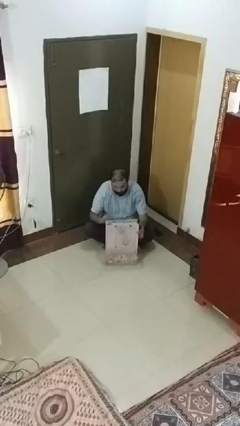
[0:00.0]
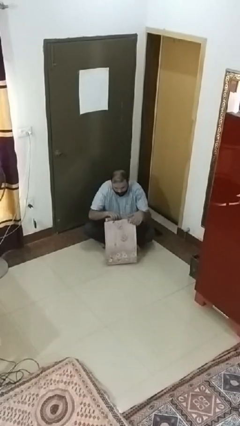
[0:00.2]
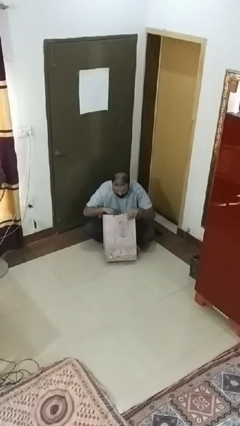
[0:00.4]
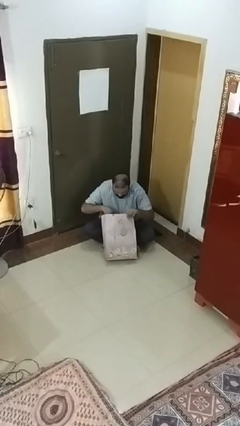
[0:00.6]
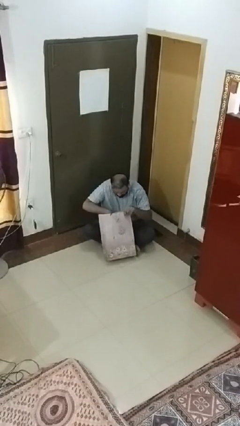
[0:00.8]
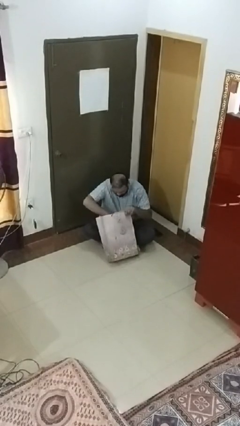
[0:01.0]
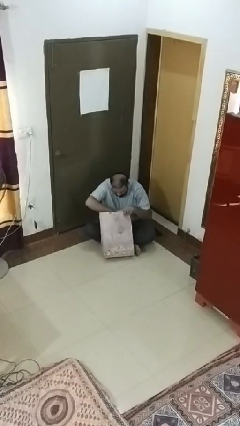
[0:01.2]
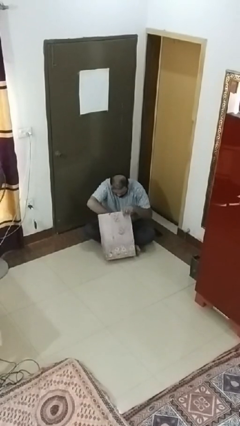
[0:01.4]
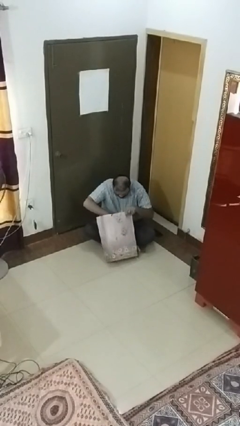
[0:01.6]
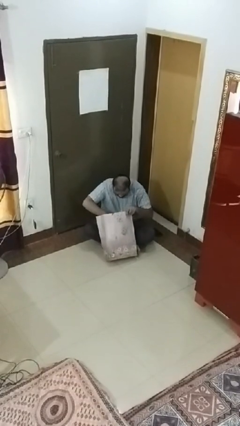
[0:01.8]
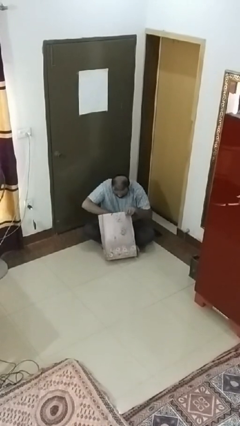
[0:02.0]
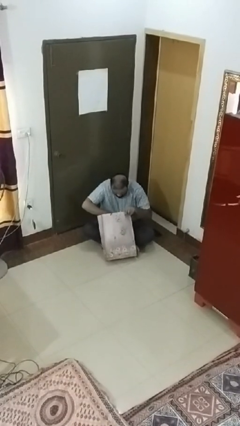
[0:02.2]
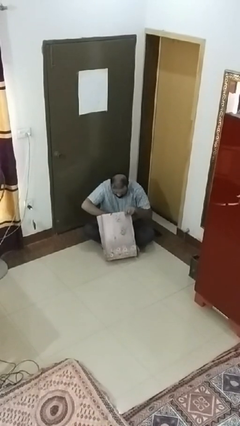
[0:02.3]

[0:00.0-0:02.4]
person searches under bed

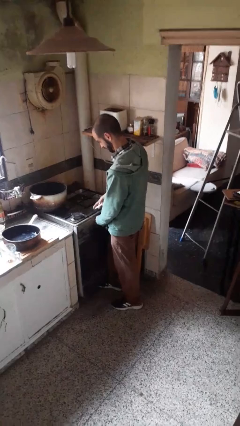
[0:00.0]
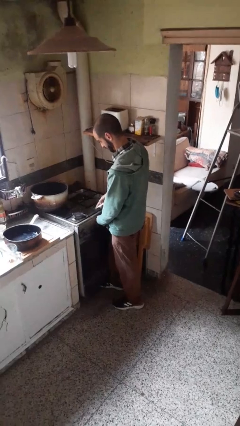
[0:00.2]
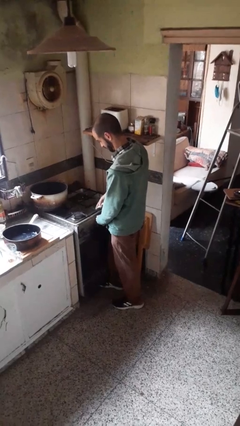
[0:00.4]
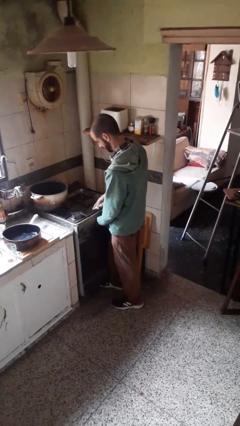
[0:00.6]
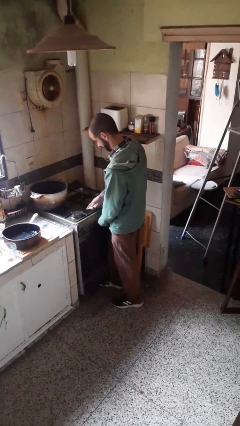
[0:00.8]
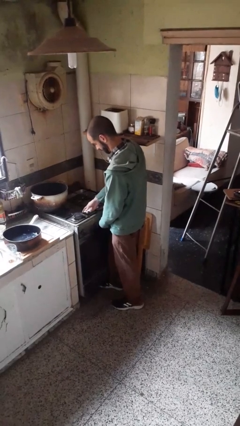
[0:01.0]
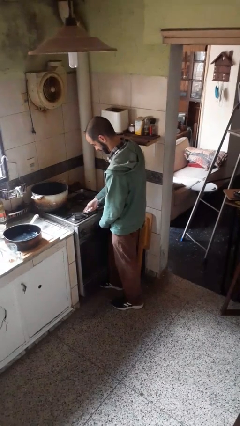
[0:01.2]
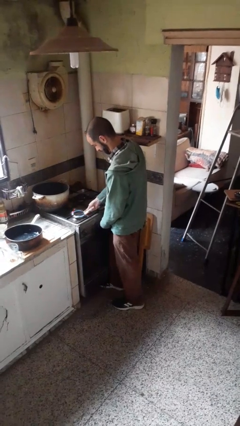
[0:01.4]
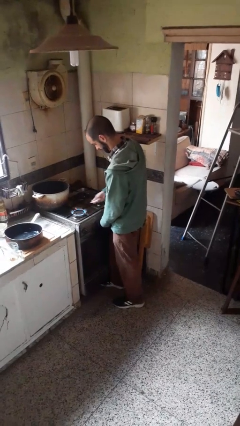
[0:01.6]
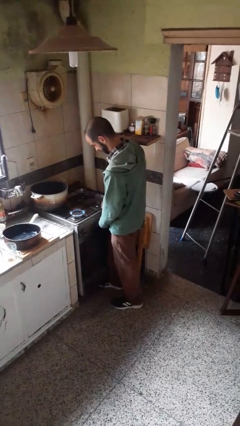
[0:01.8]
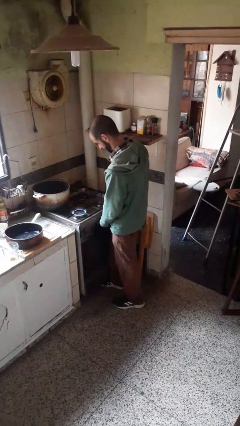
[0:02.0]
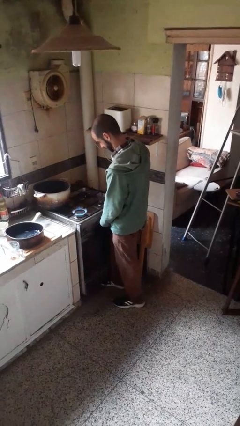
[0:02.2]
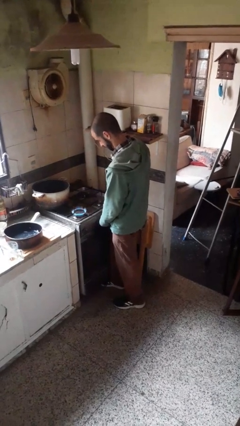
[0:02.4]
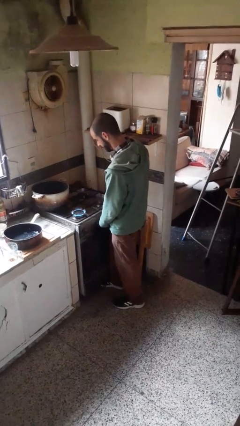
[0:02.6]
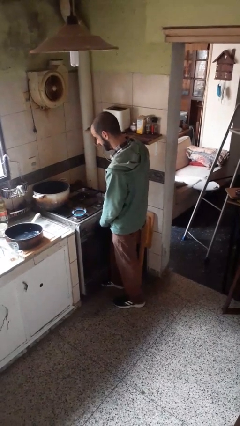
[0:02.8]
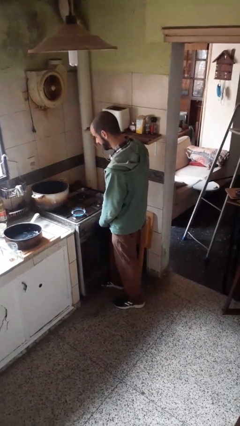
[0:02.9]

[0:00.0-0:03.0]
person turns on stovetop

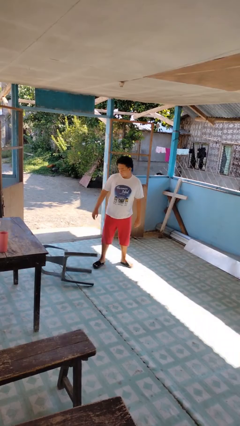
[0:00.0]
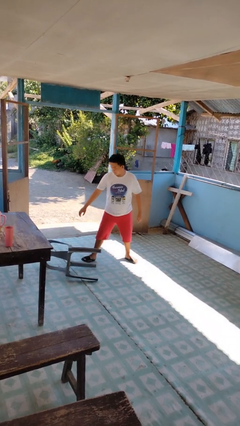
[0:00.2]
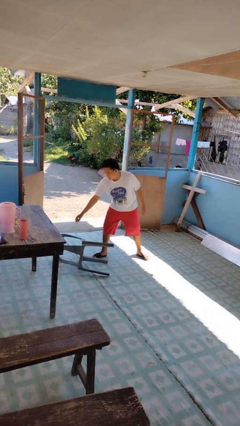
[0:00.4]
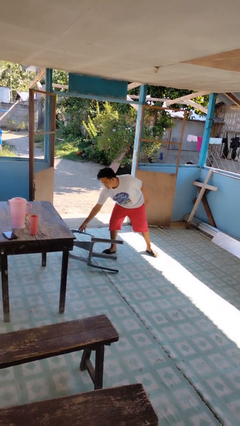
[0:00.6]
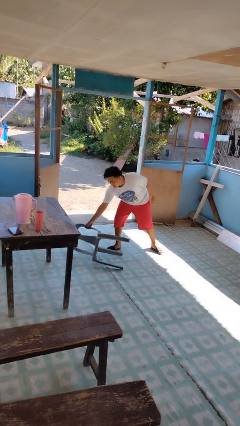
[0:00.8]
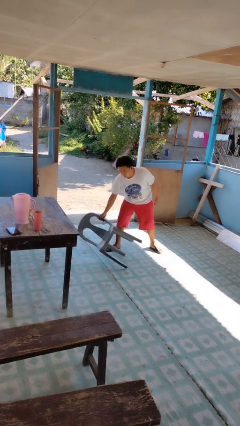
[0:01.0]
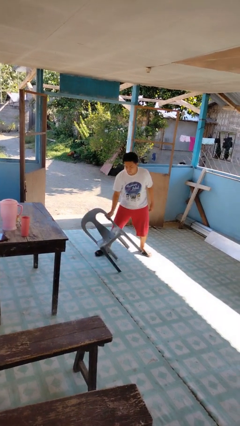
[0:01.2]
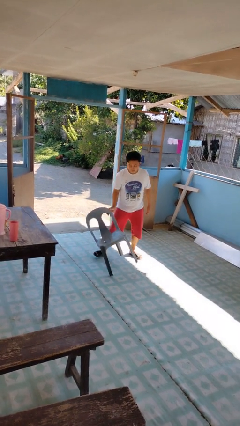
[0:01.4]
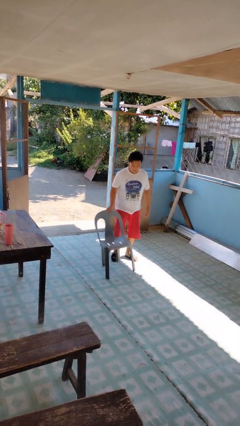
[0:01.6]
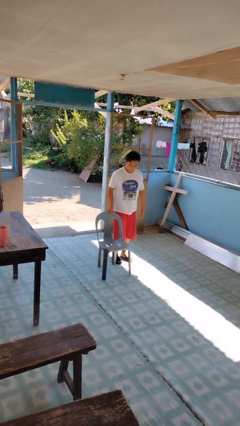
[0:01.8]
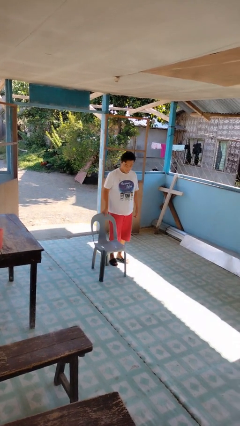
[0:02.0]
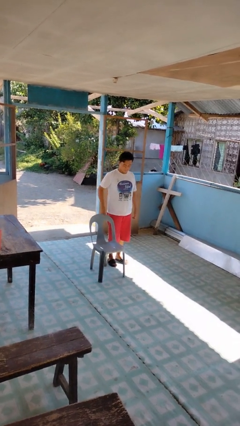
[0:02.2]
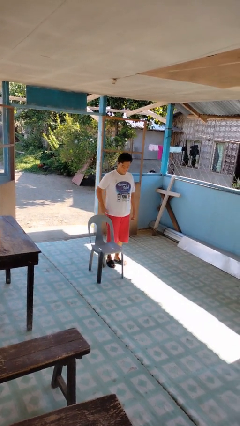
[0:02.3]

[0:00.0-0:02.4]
person sets upright furniture

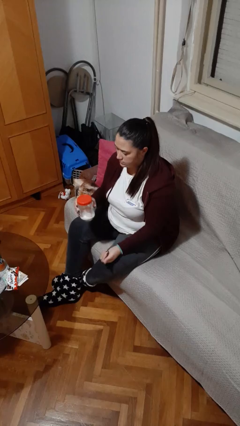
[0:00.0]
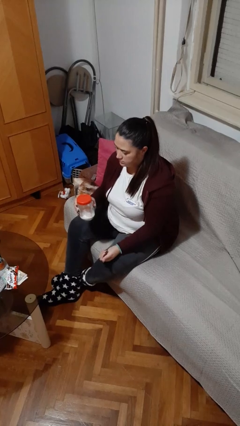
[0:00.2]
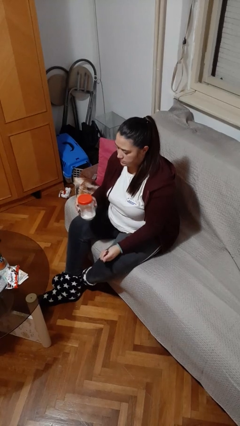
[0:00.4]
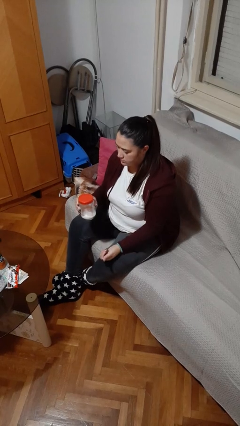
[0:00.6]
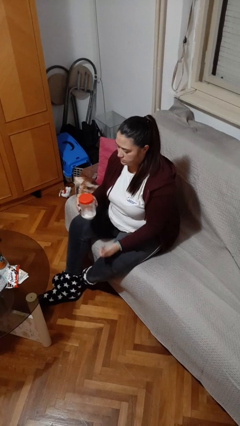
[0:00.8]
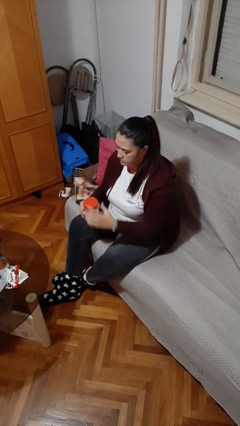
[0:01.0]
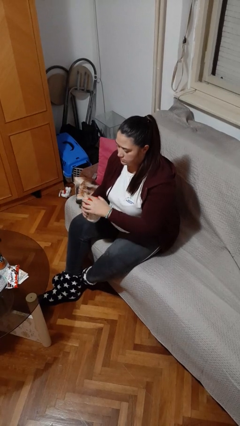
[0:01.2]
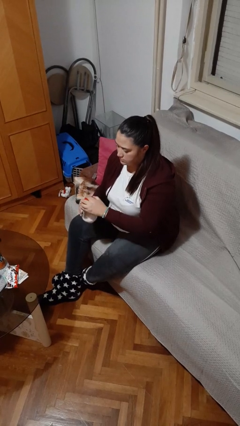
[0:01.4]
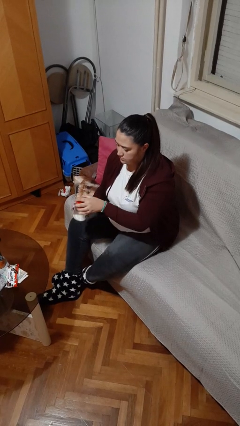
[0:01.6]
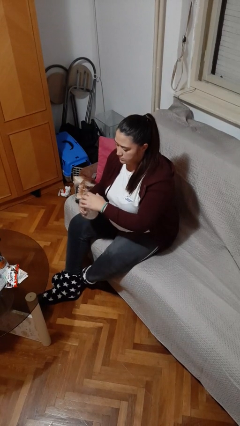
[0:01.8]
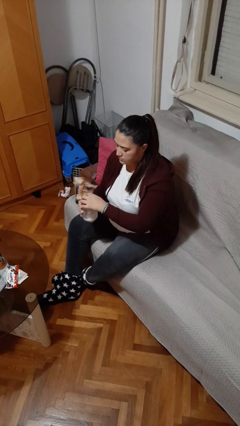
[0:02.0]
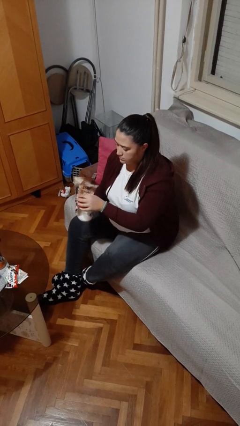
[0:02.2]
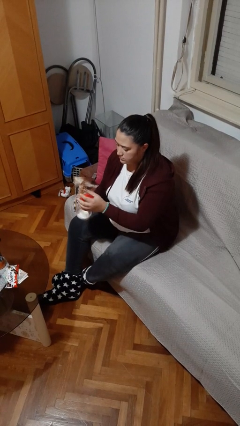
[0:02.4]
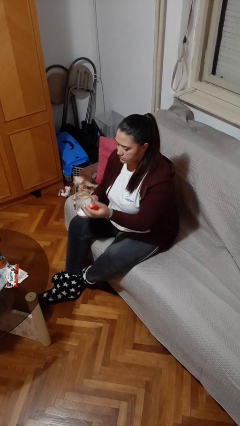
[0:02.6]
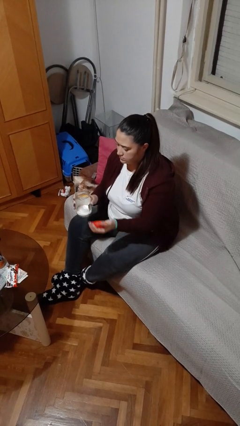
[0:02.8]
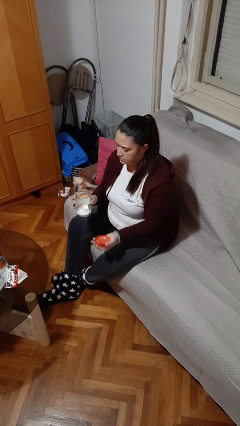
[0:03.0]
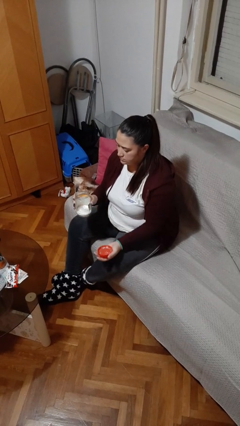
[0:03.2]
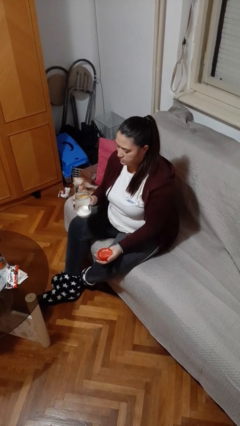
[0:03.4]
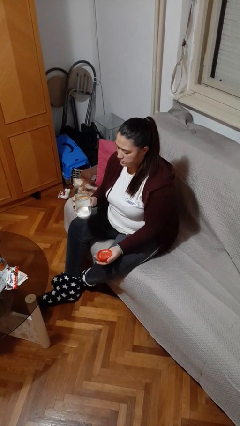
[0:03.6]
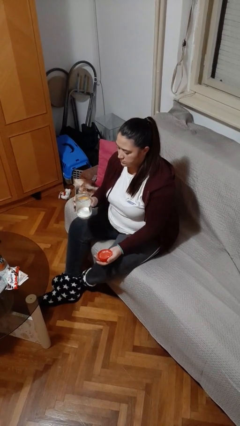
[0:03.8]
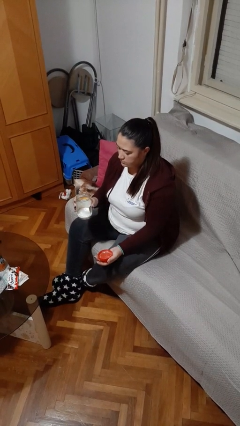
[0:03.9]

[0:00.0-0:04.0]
person opens jar

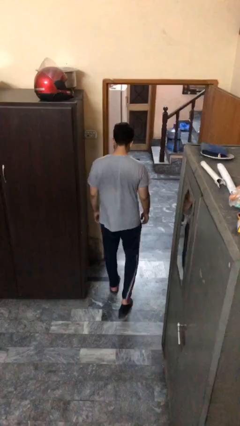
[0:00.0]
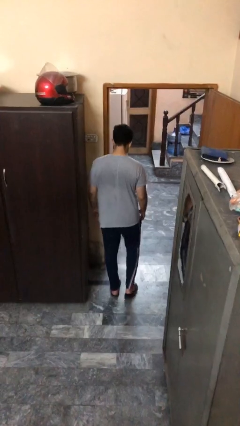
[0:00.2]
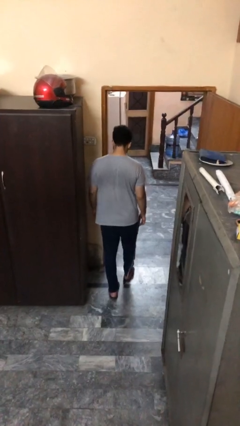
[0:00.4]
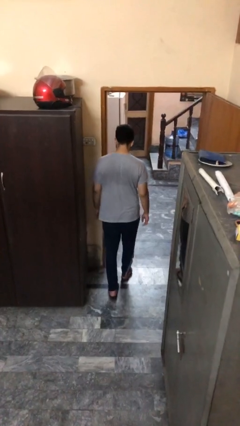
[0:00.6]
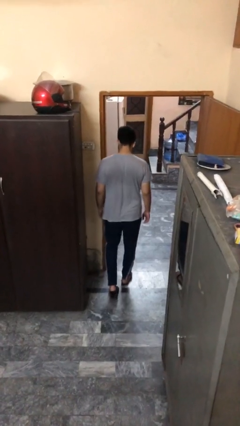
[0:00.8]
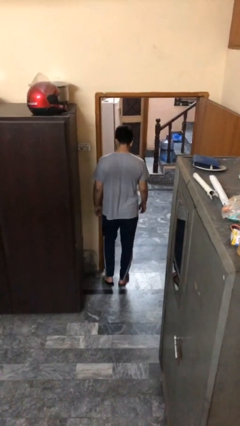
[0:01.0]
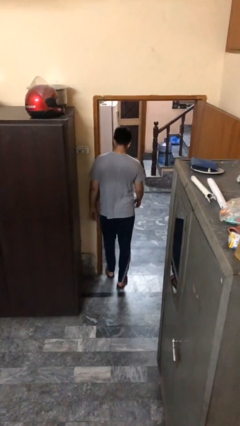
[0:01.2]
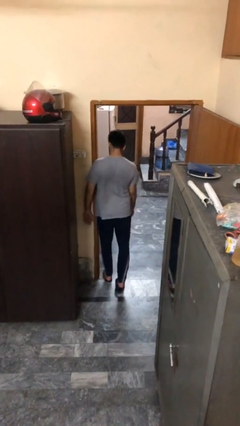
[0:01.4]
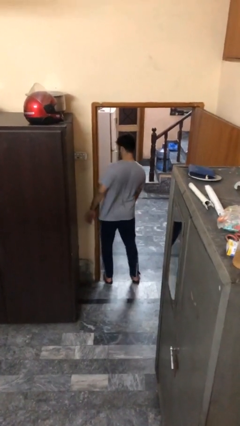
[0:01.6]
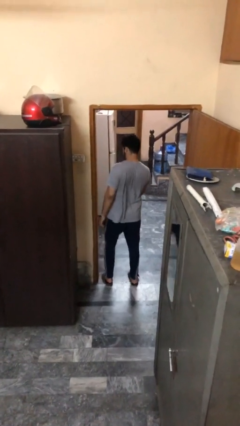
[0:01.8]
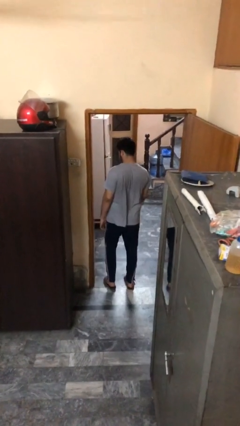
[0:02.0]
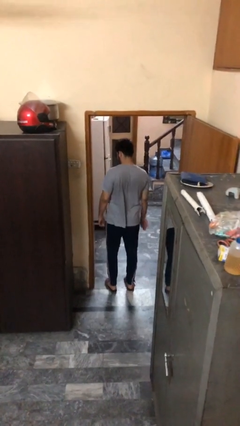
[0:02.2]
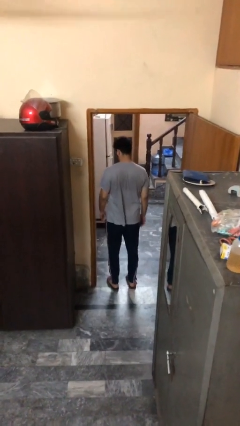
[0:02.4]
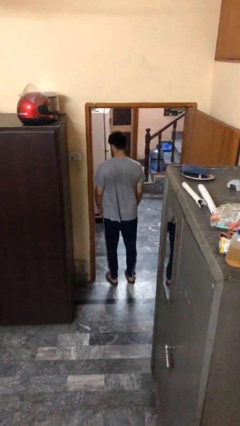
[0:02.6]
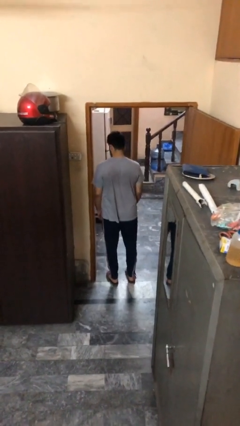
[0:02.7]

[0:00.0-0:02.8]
person bumps into wall

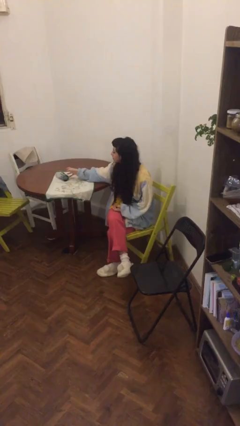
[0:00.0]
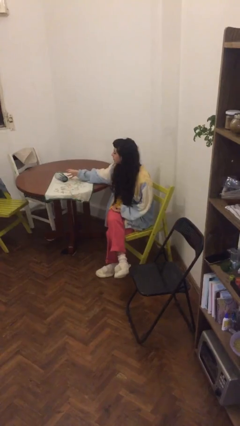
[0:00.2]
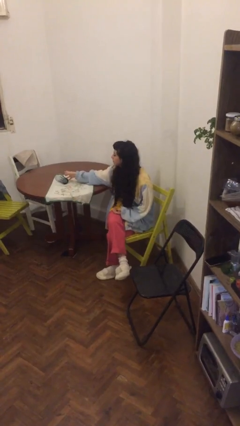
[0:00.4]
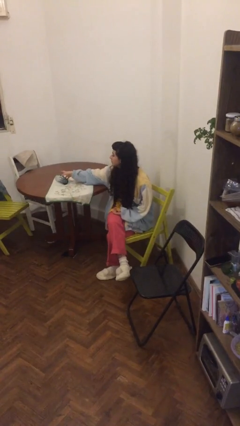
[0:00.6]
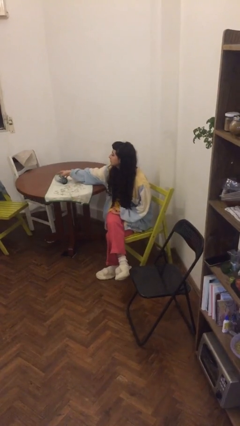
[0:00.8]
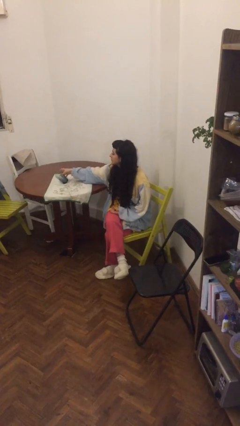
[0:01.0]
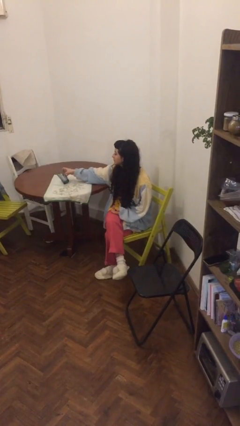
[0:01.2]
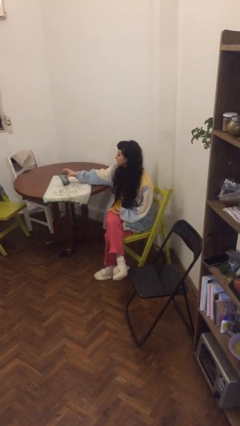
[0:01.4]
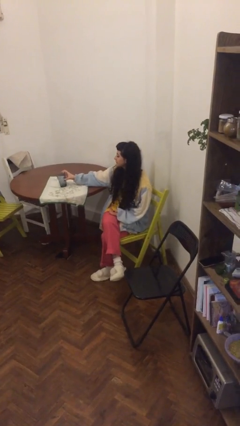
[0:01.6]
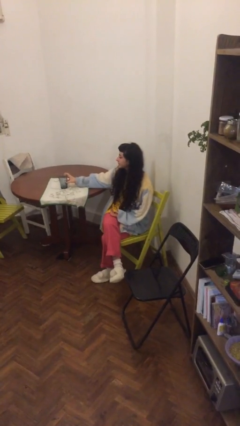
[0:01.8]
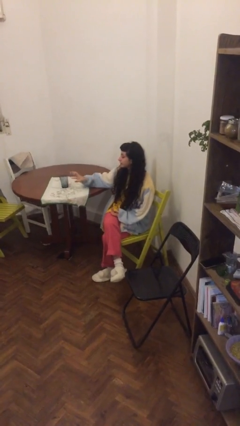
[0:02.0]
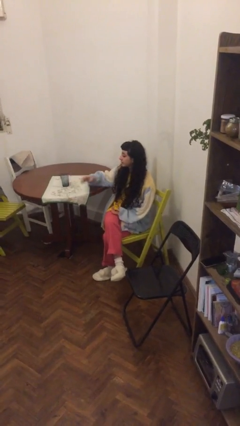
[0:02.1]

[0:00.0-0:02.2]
person sets upright glass

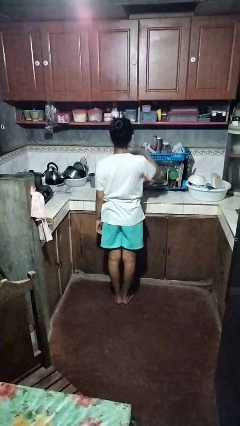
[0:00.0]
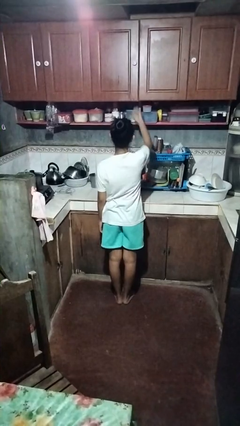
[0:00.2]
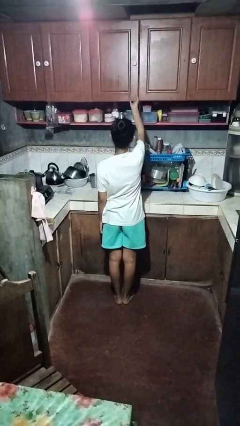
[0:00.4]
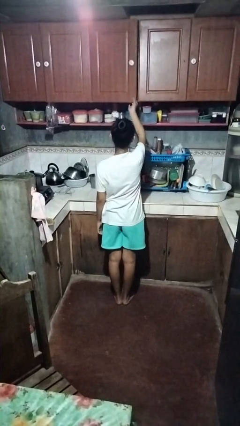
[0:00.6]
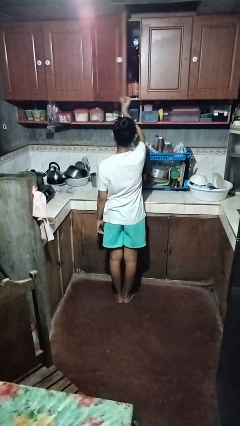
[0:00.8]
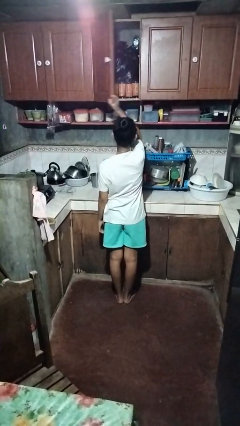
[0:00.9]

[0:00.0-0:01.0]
person opens cabinet
